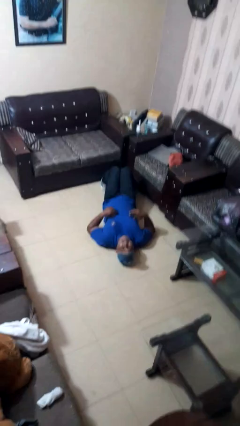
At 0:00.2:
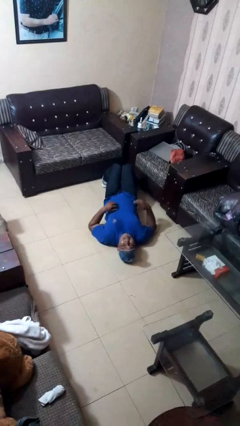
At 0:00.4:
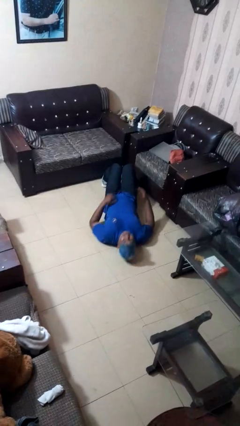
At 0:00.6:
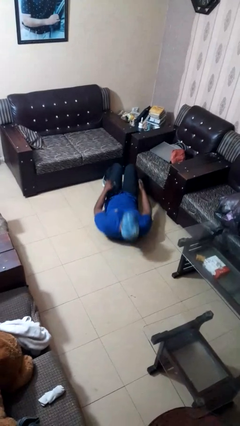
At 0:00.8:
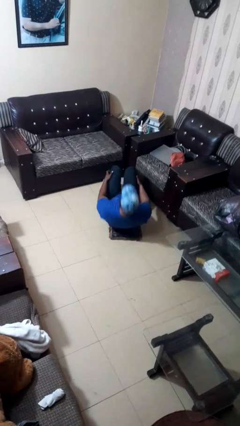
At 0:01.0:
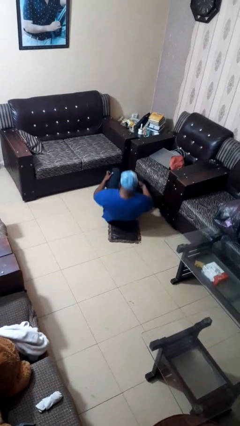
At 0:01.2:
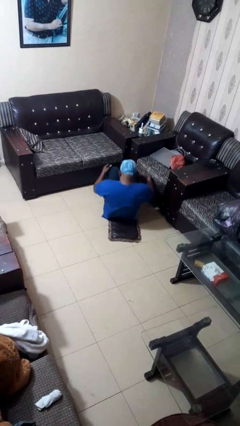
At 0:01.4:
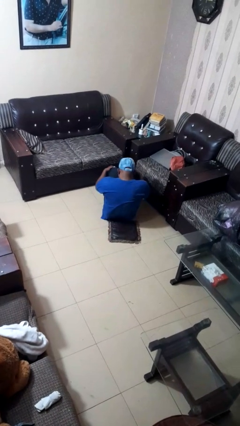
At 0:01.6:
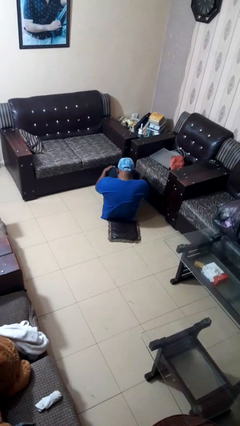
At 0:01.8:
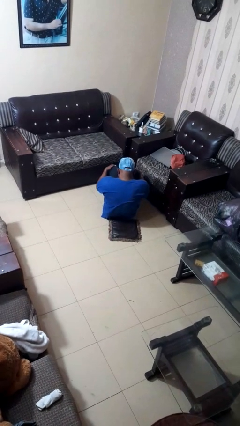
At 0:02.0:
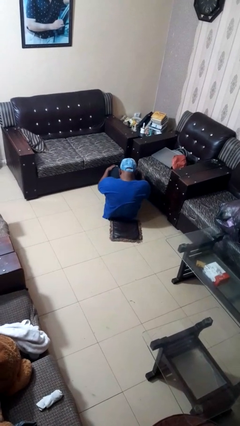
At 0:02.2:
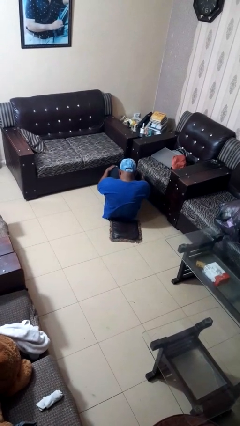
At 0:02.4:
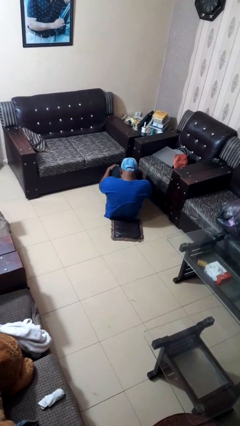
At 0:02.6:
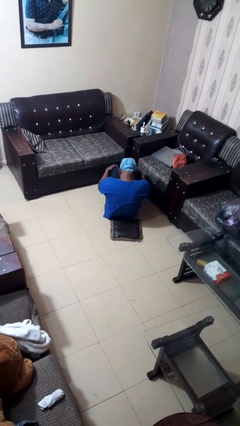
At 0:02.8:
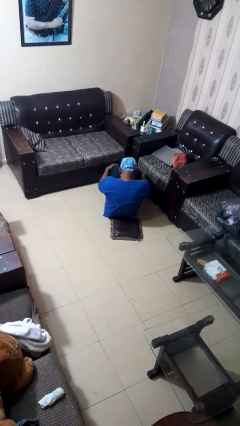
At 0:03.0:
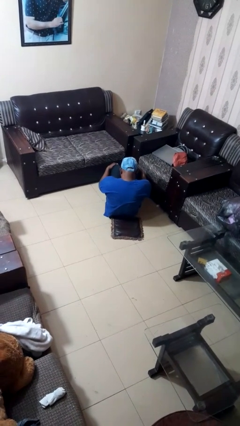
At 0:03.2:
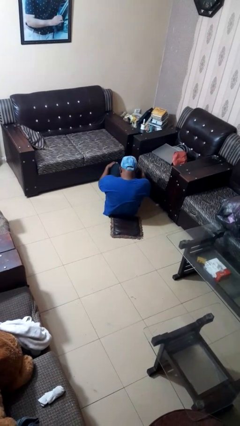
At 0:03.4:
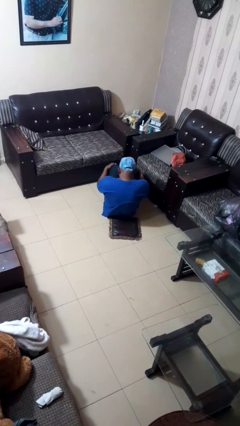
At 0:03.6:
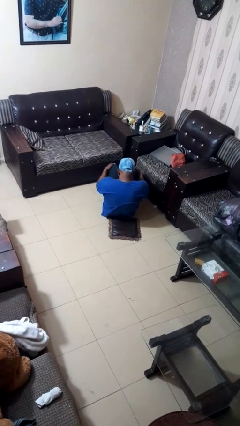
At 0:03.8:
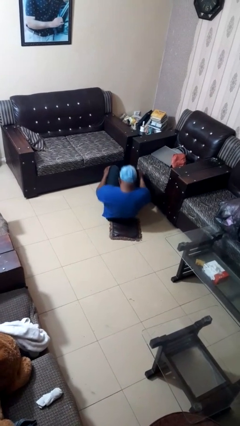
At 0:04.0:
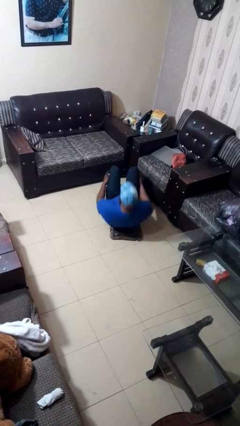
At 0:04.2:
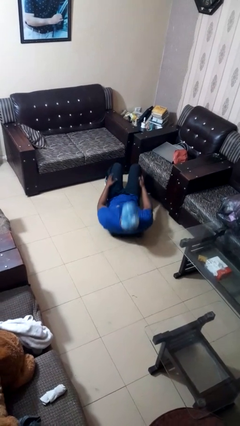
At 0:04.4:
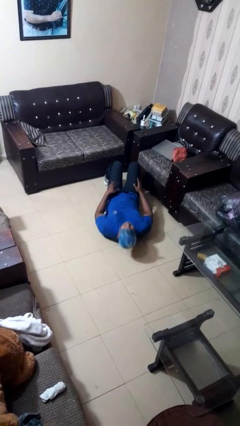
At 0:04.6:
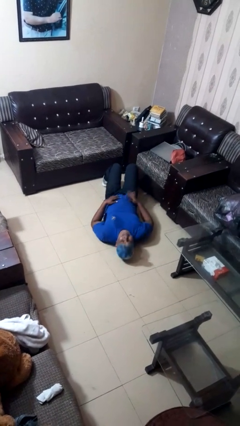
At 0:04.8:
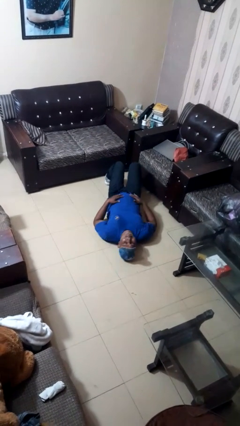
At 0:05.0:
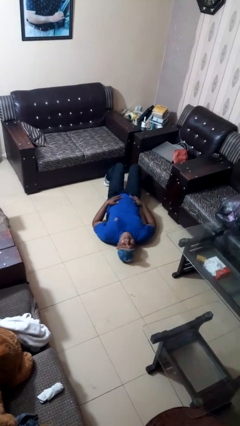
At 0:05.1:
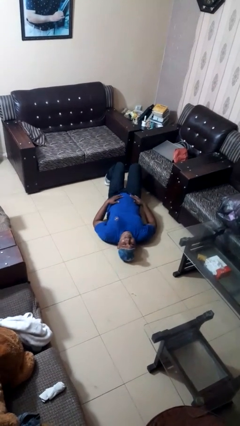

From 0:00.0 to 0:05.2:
person exercises with situp

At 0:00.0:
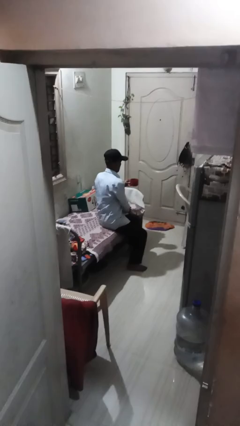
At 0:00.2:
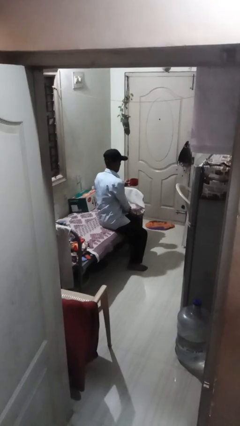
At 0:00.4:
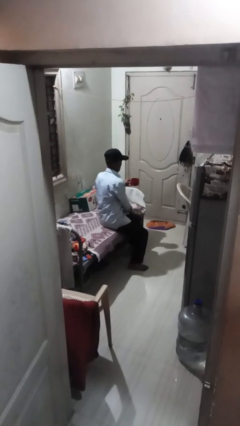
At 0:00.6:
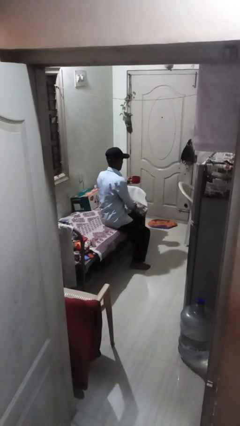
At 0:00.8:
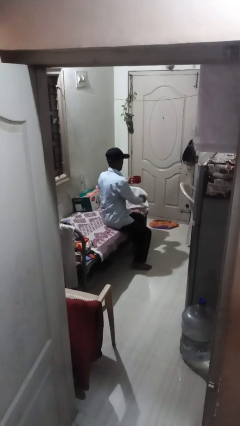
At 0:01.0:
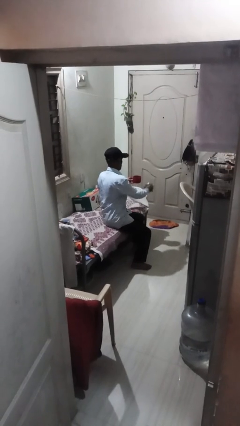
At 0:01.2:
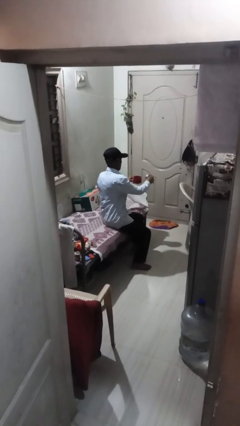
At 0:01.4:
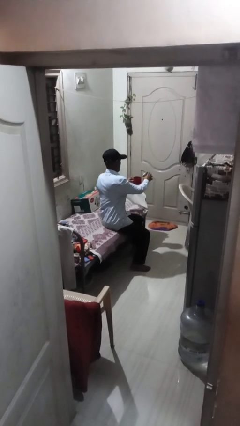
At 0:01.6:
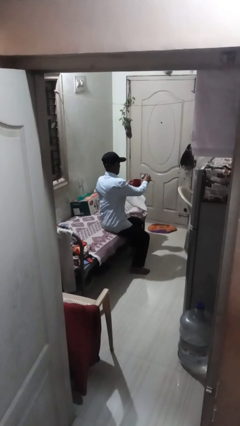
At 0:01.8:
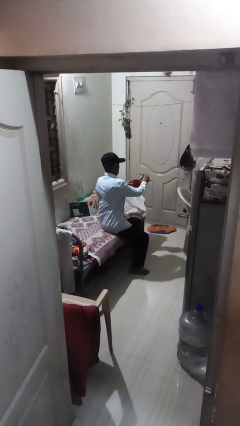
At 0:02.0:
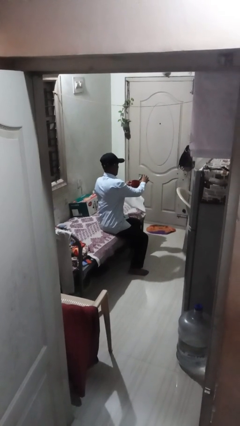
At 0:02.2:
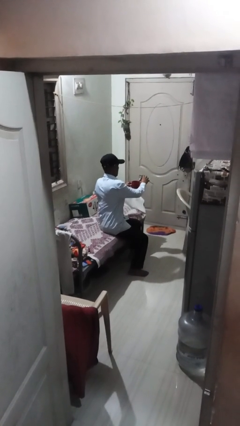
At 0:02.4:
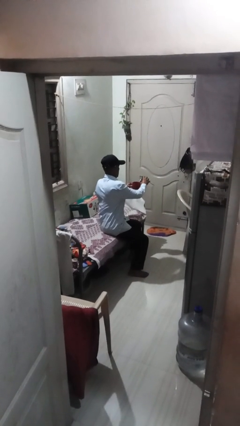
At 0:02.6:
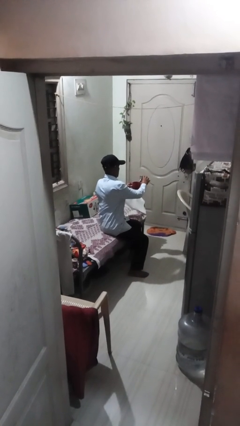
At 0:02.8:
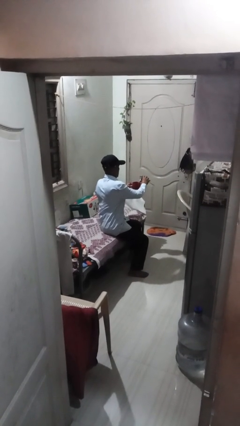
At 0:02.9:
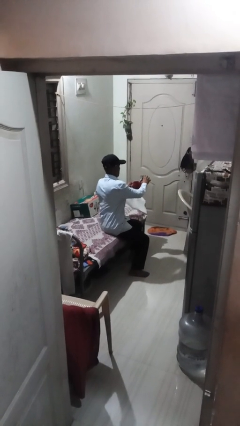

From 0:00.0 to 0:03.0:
person pours coffee into mug

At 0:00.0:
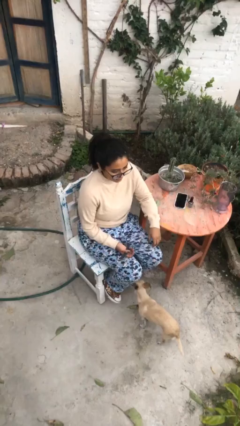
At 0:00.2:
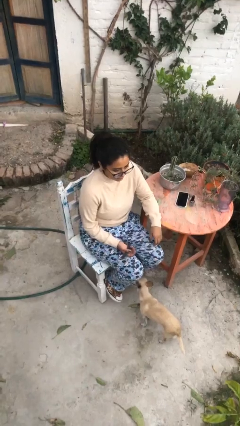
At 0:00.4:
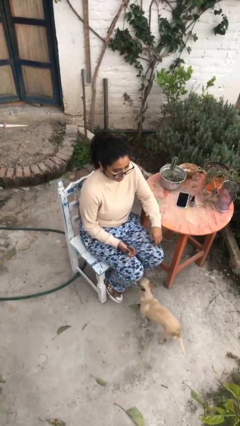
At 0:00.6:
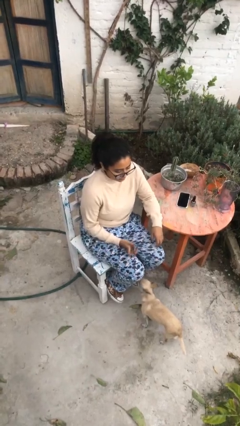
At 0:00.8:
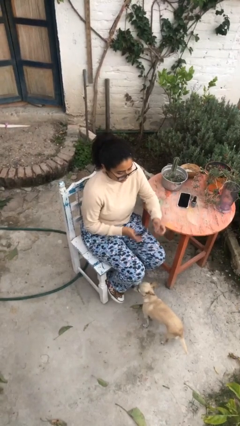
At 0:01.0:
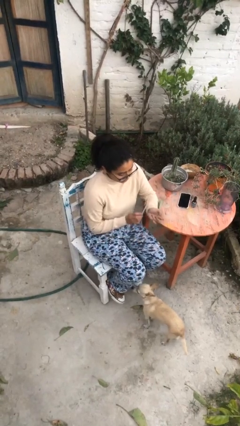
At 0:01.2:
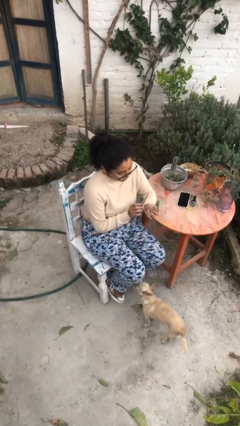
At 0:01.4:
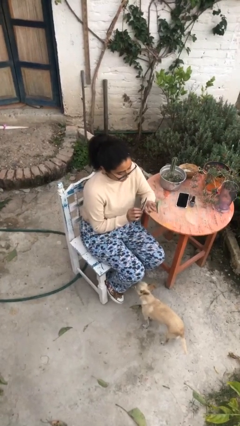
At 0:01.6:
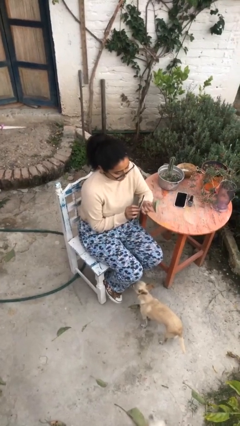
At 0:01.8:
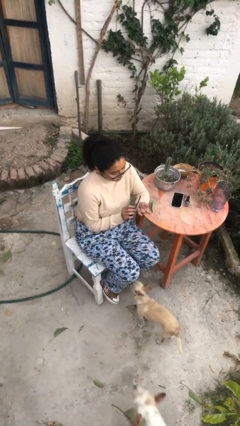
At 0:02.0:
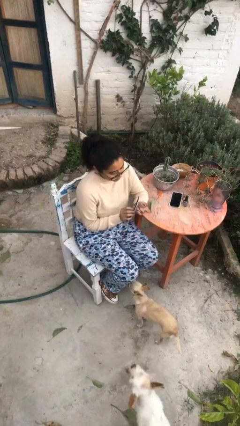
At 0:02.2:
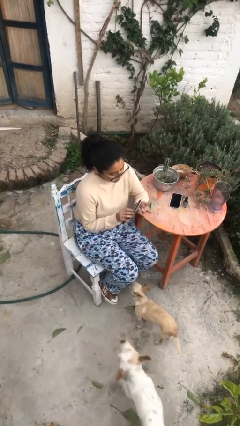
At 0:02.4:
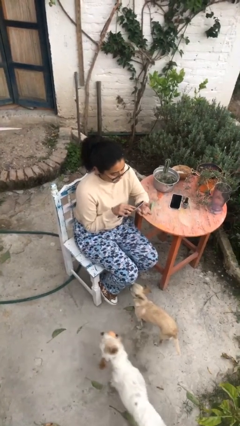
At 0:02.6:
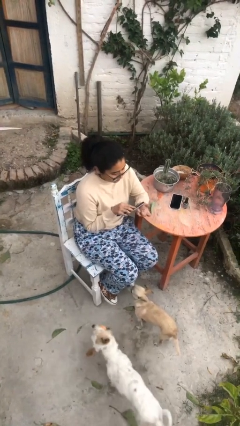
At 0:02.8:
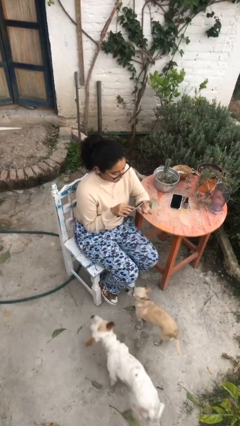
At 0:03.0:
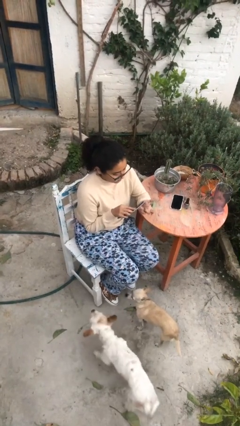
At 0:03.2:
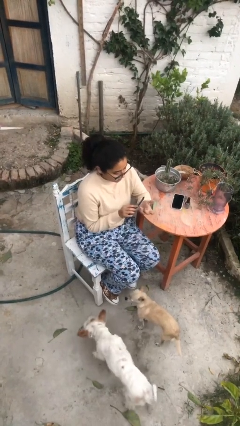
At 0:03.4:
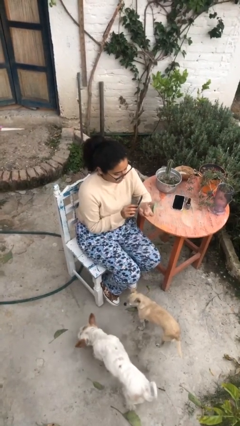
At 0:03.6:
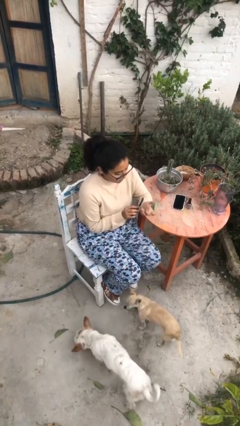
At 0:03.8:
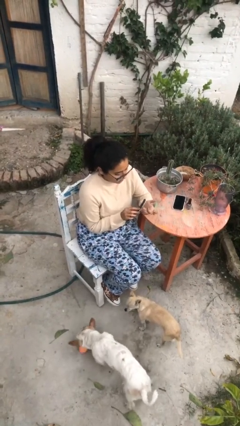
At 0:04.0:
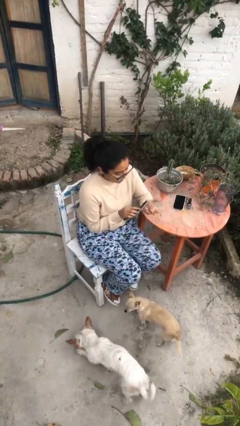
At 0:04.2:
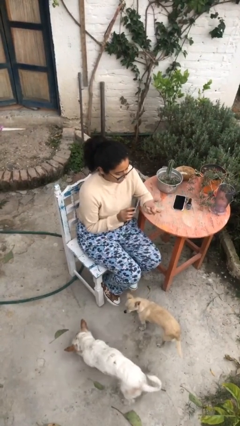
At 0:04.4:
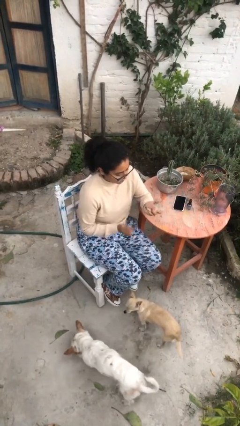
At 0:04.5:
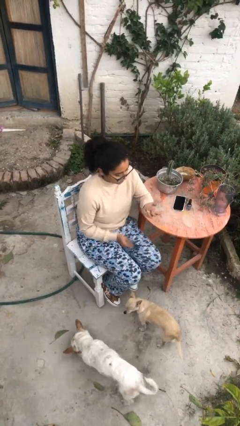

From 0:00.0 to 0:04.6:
person files fingernails

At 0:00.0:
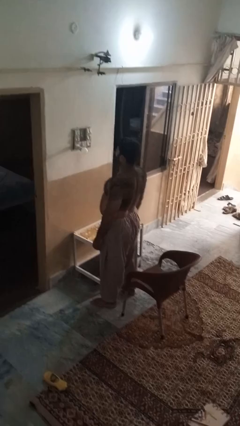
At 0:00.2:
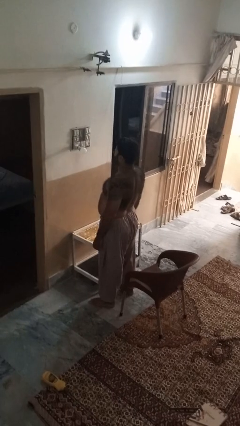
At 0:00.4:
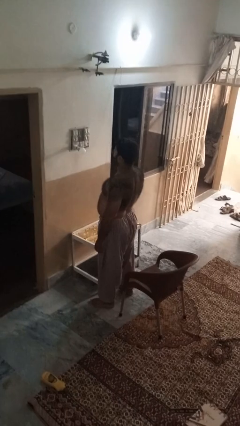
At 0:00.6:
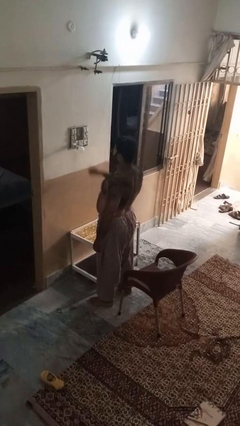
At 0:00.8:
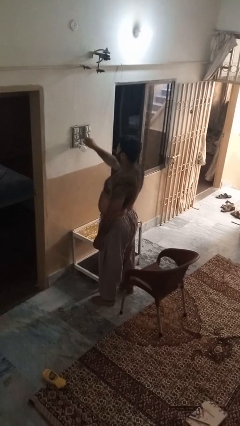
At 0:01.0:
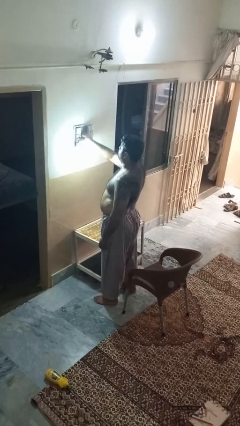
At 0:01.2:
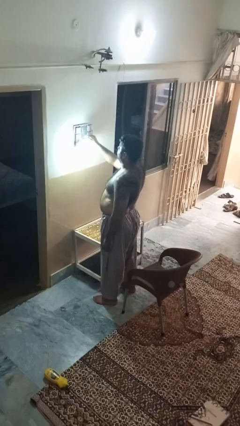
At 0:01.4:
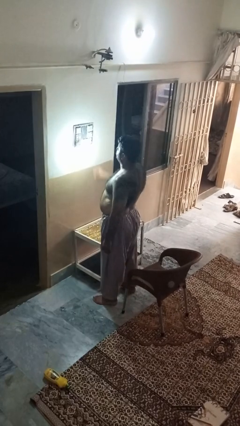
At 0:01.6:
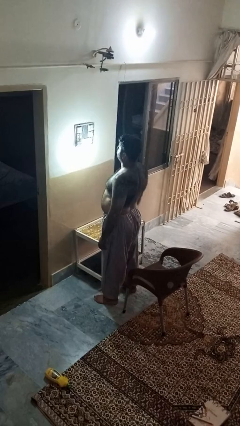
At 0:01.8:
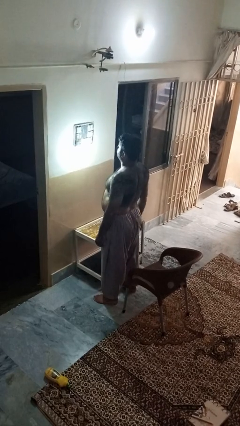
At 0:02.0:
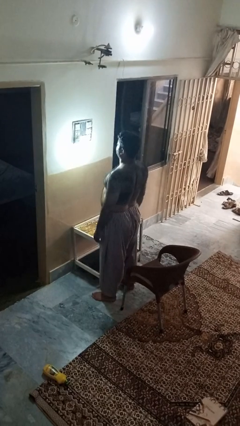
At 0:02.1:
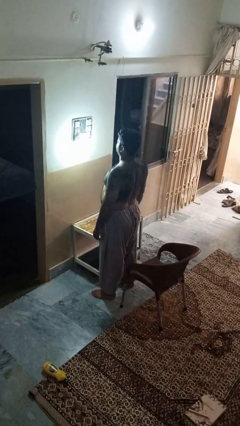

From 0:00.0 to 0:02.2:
person turns on lamp

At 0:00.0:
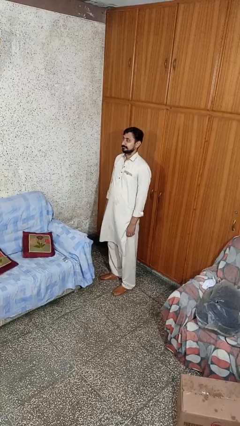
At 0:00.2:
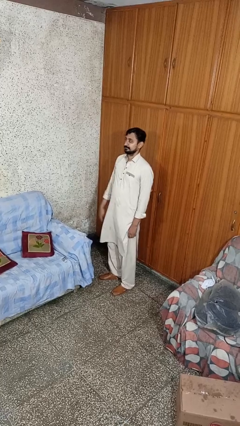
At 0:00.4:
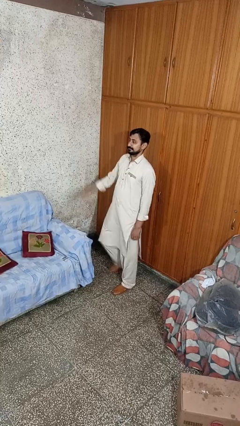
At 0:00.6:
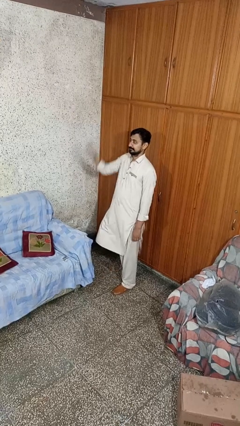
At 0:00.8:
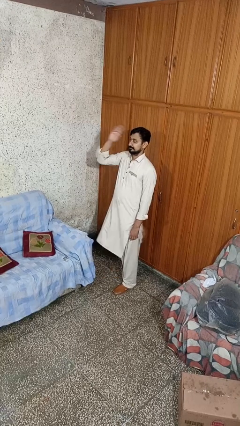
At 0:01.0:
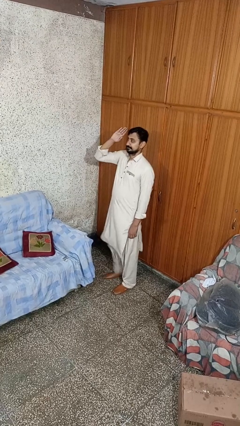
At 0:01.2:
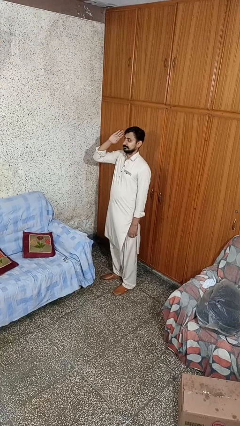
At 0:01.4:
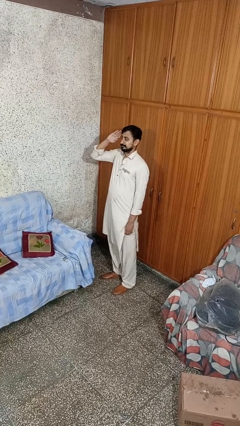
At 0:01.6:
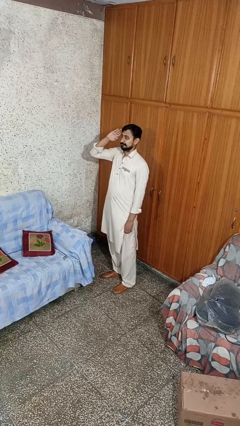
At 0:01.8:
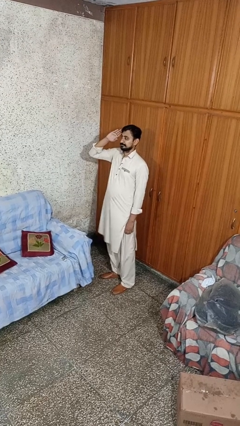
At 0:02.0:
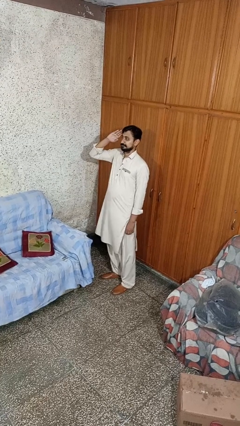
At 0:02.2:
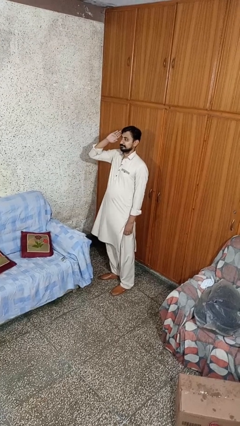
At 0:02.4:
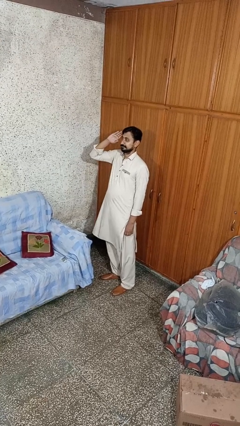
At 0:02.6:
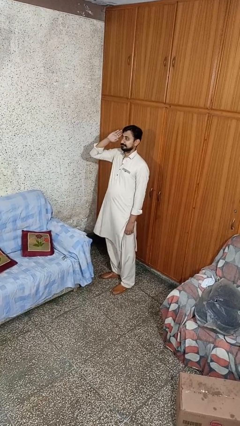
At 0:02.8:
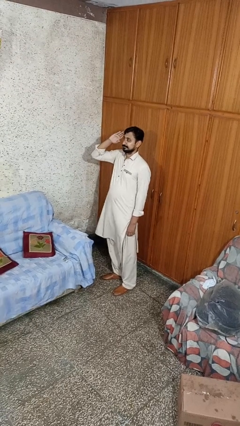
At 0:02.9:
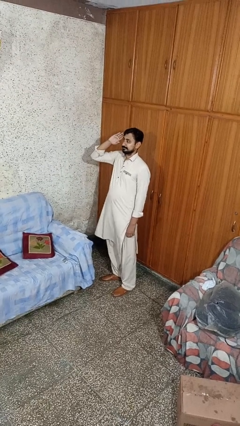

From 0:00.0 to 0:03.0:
person salutes
